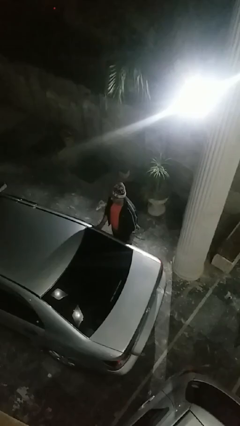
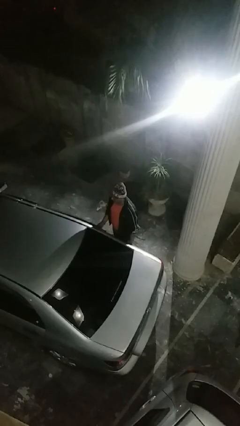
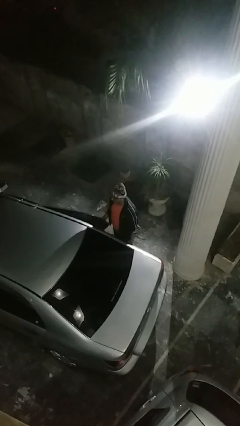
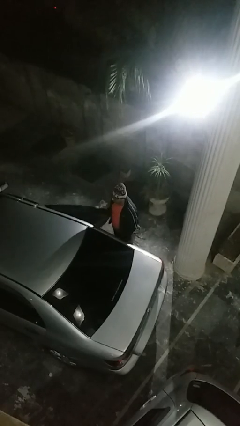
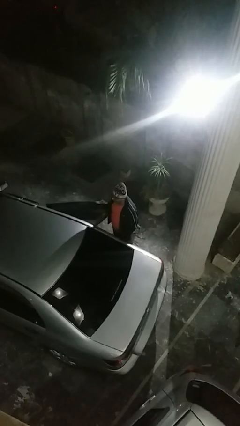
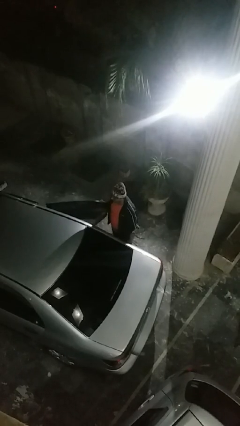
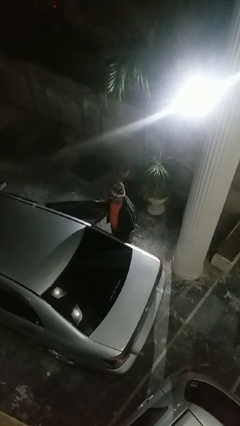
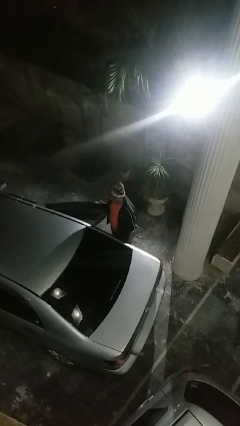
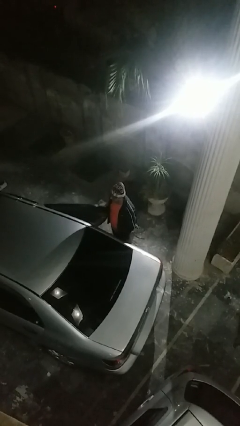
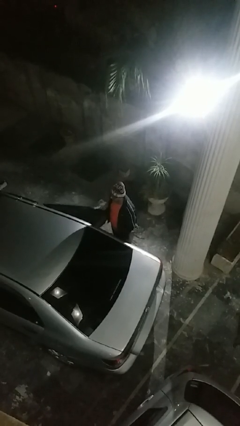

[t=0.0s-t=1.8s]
person opens car door

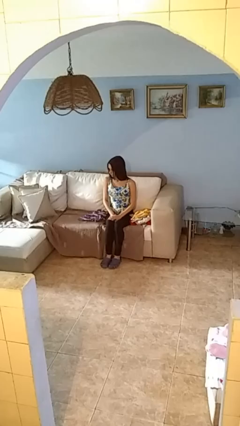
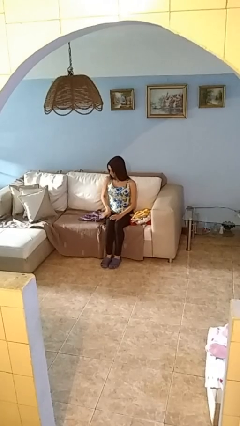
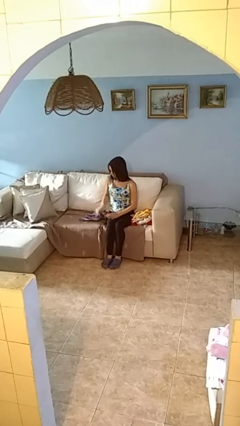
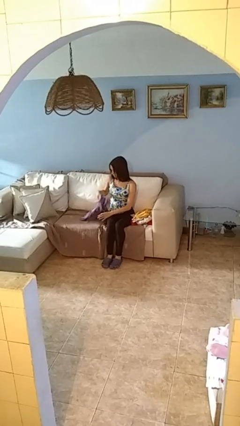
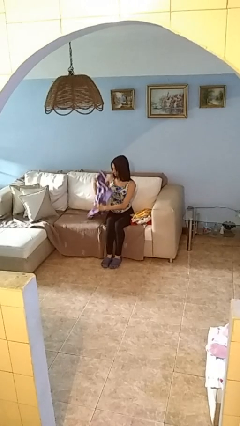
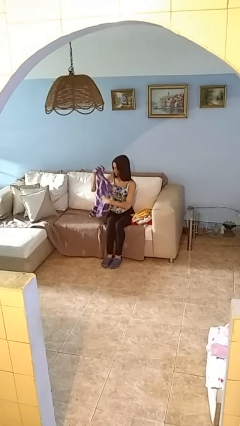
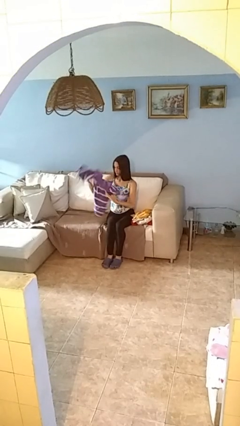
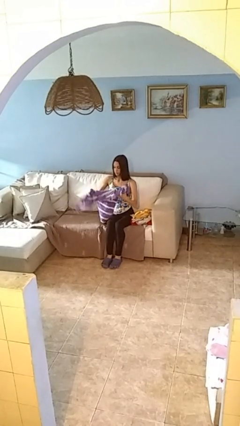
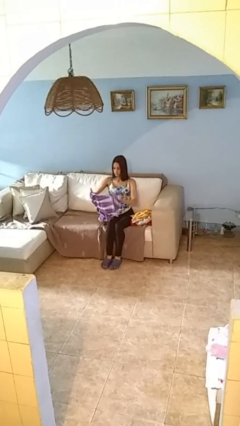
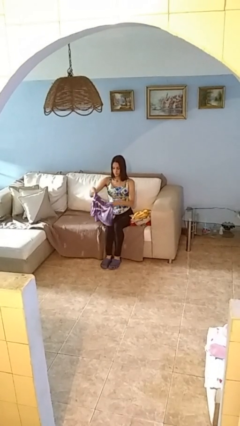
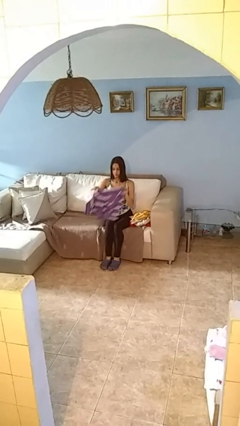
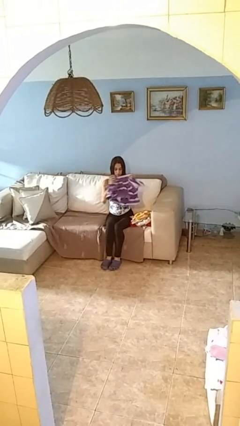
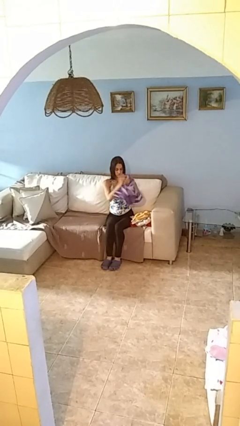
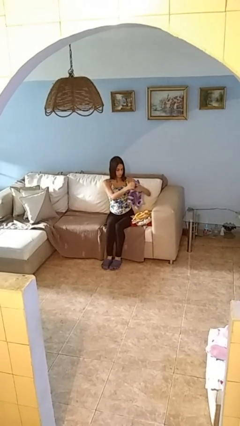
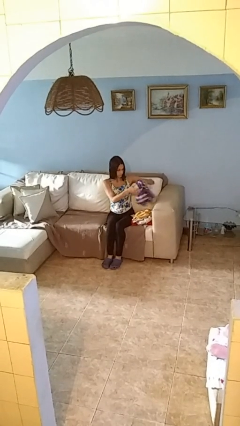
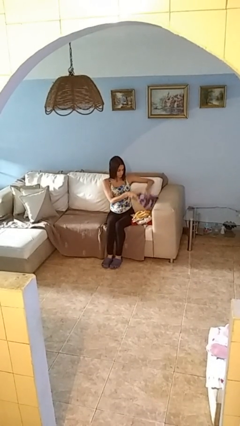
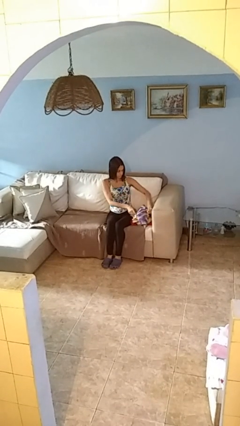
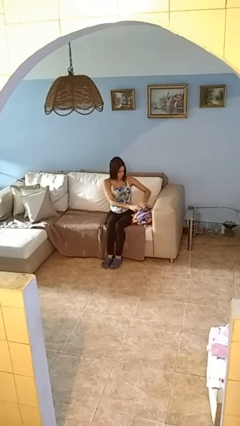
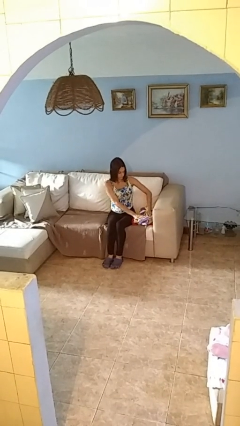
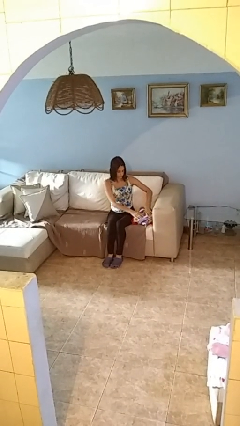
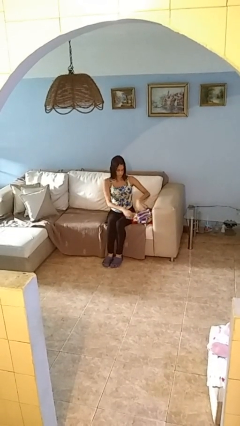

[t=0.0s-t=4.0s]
person folds shirt

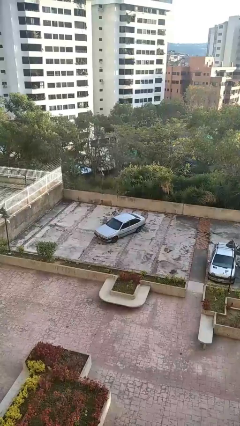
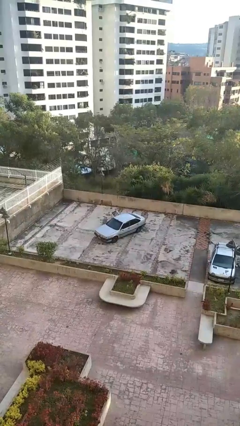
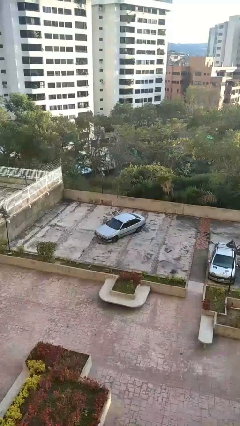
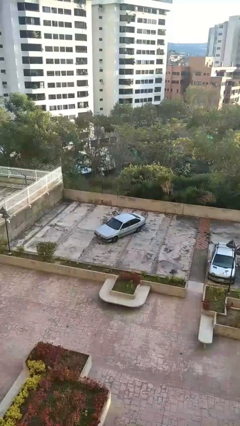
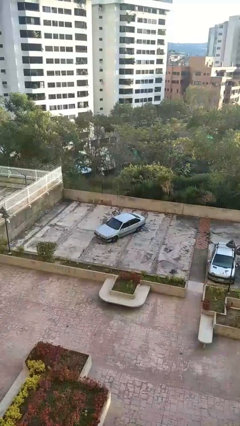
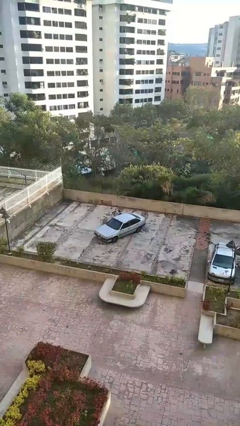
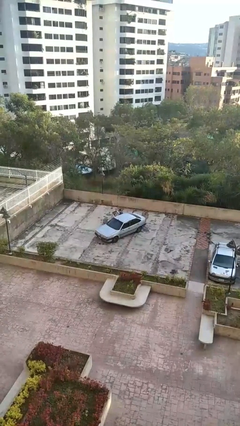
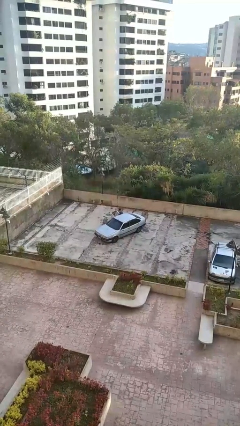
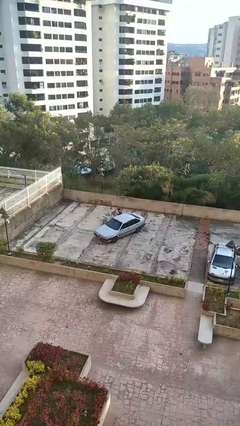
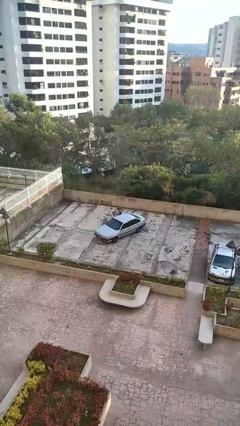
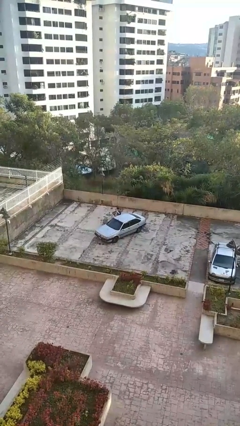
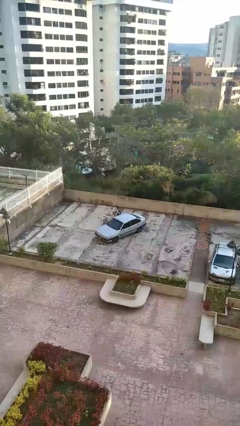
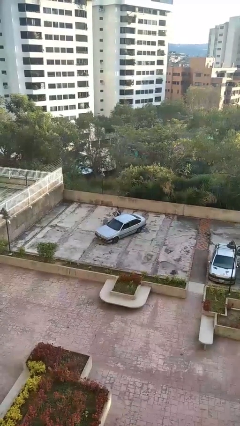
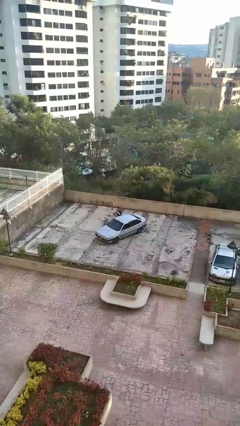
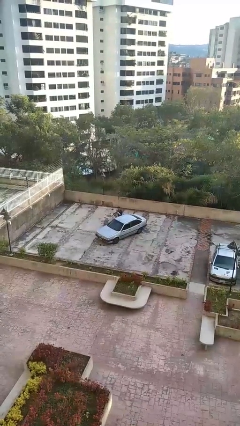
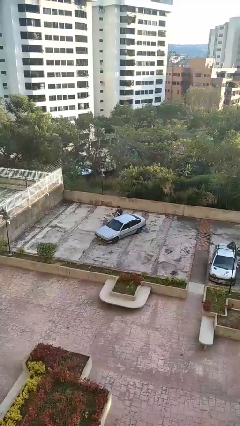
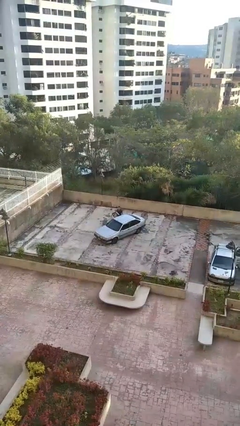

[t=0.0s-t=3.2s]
person exits car

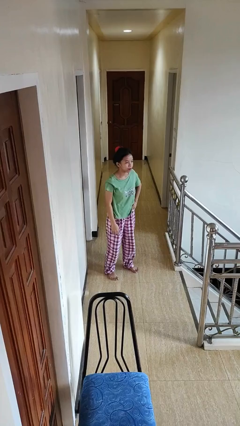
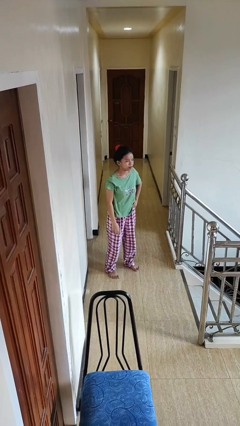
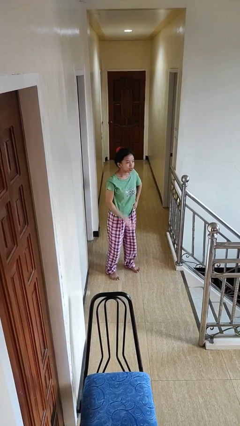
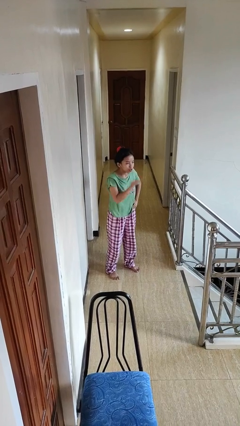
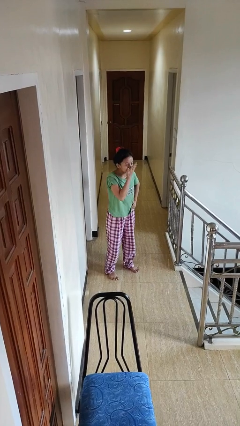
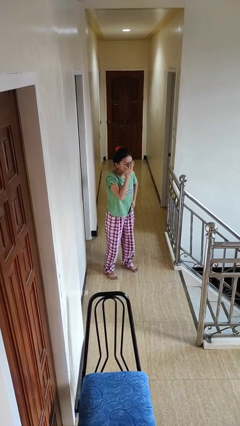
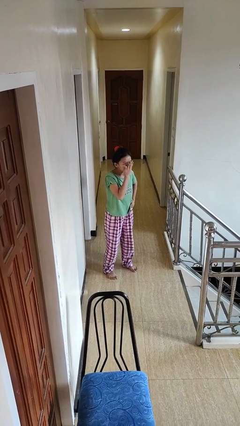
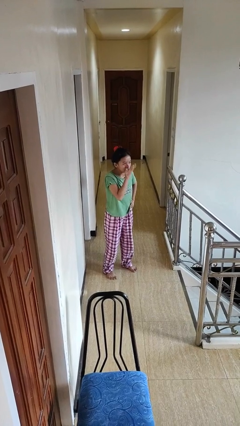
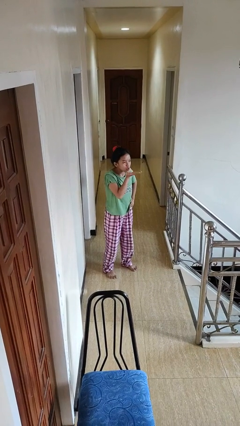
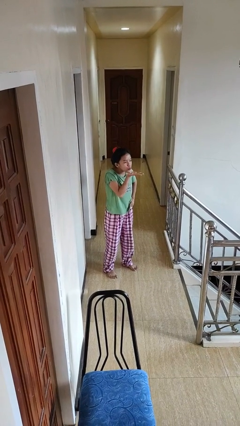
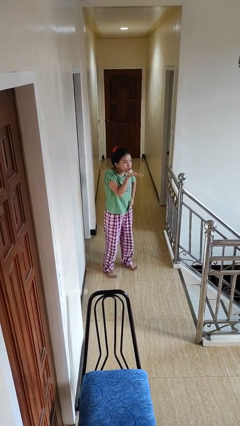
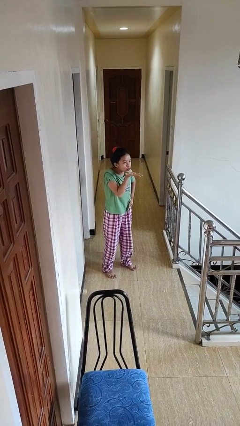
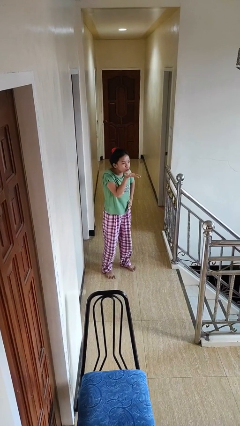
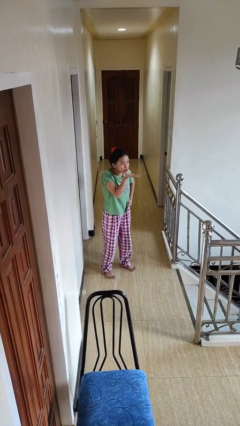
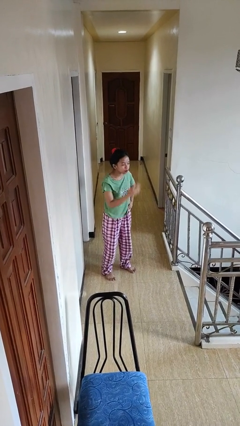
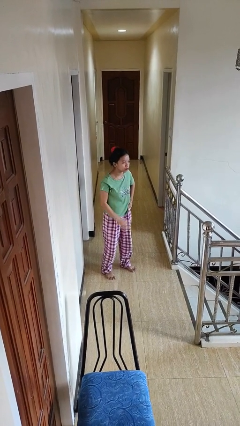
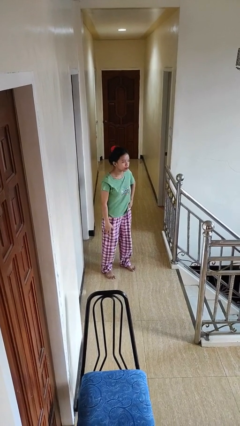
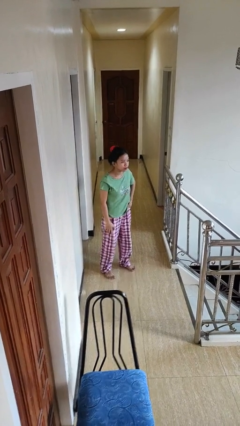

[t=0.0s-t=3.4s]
person gestures blow kiss

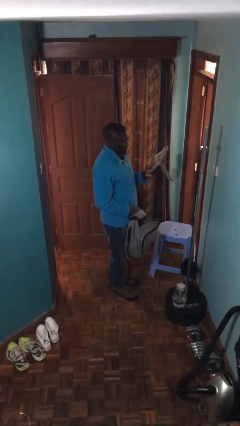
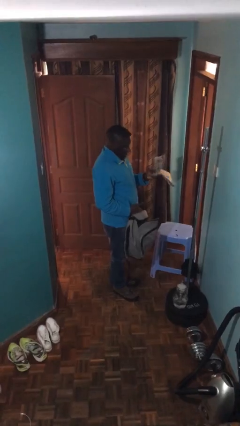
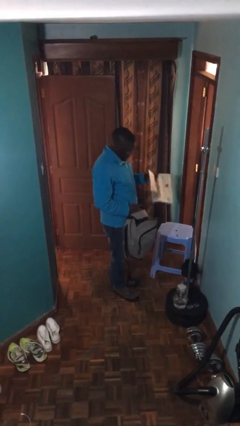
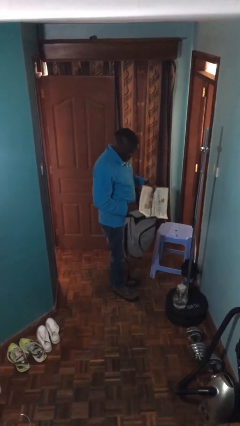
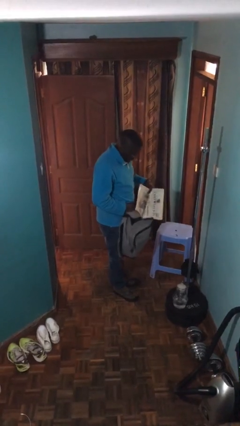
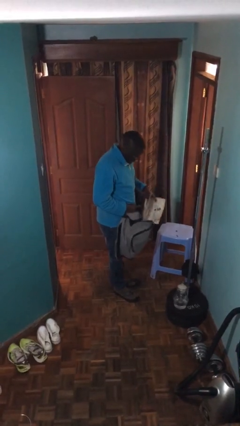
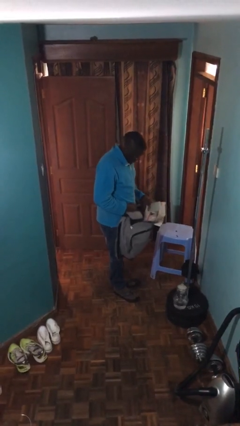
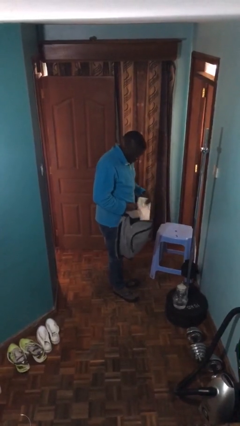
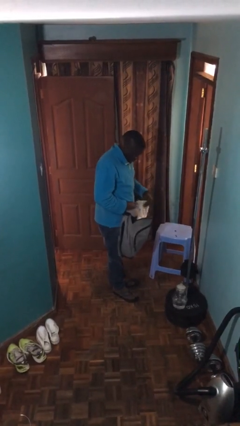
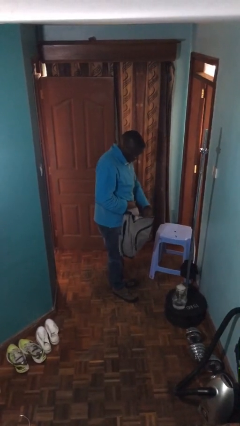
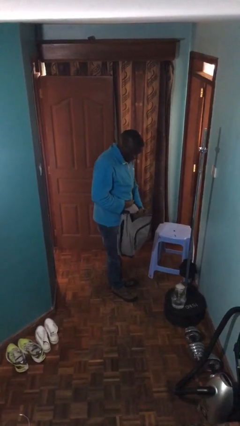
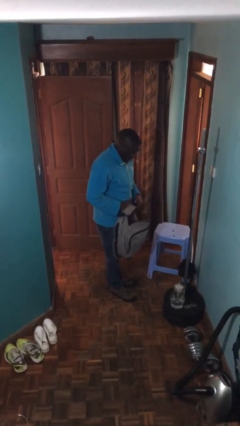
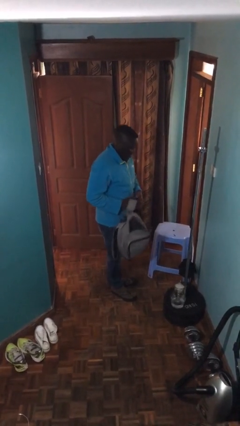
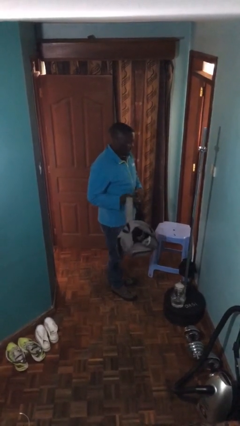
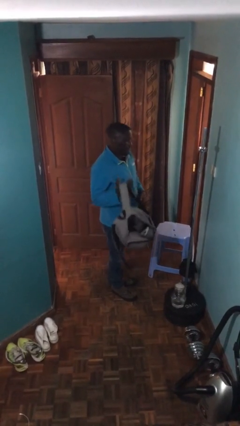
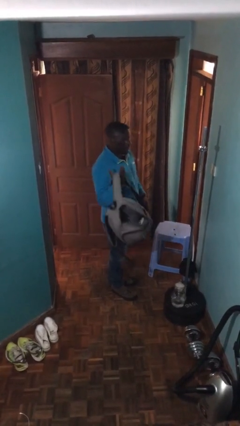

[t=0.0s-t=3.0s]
person puts object into backpack

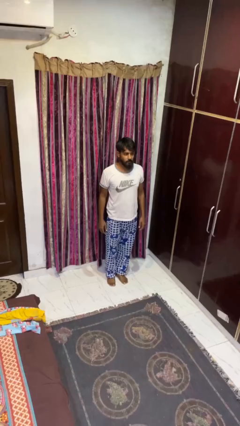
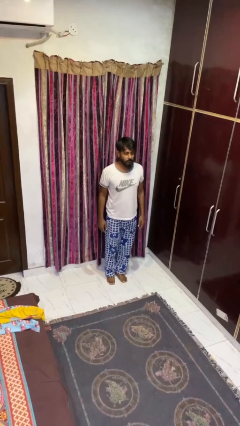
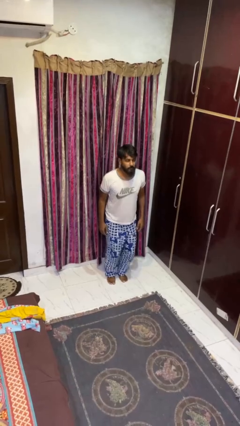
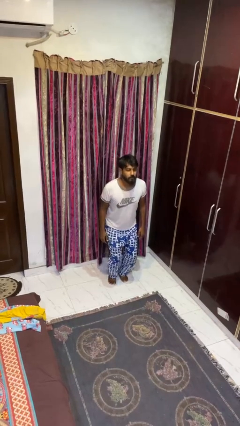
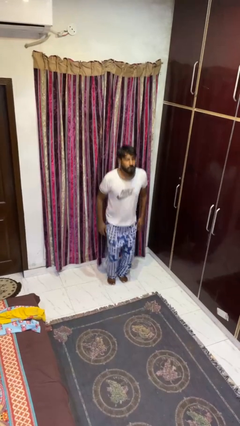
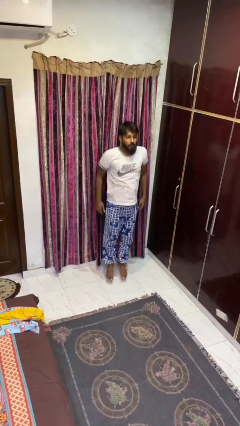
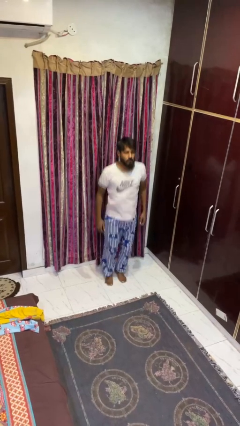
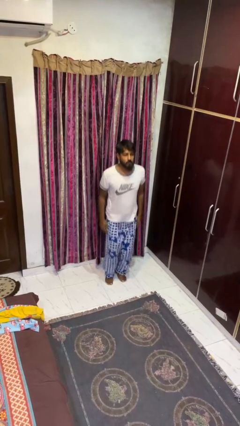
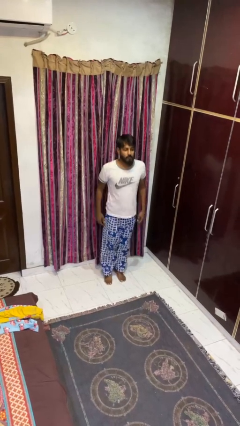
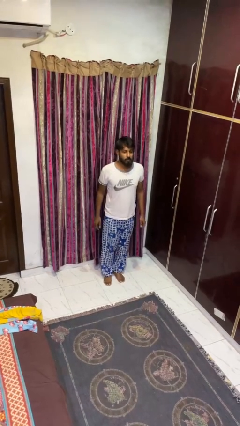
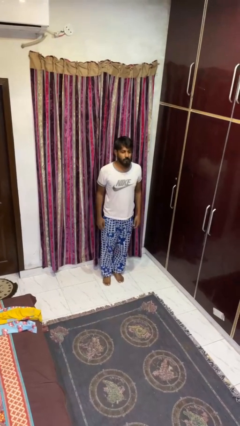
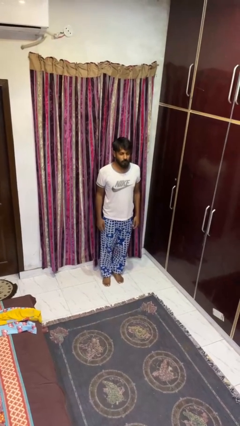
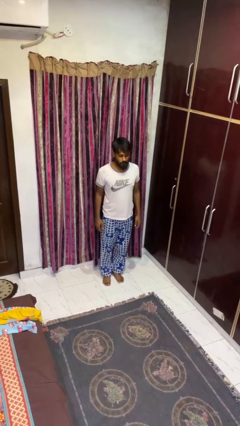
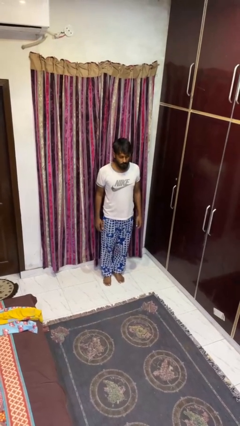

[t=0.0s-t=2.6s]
person jumps
